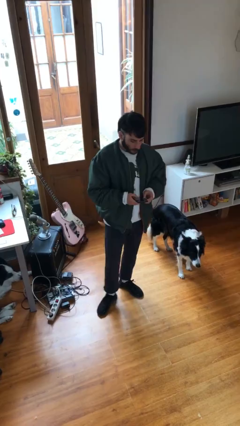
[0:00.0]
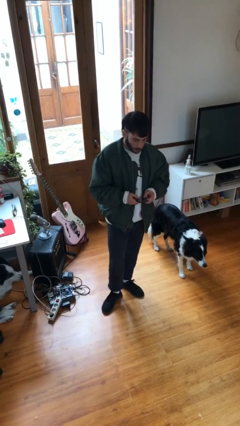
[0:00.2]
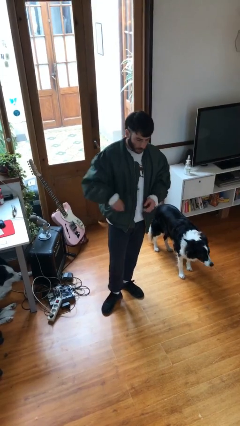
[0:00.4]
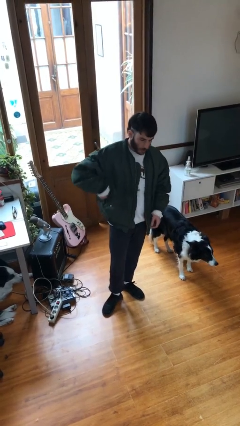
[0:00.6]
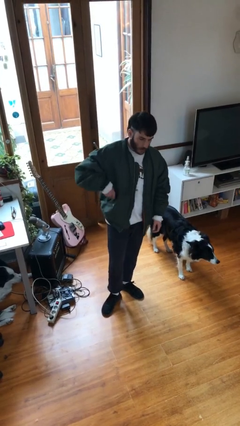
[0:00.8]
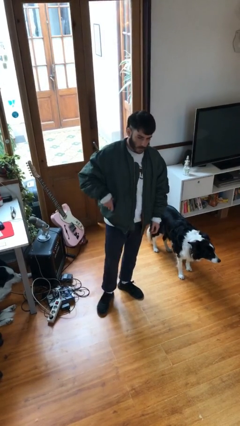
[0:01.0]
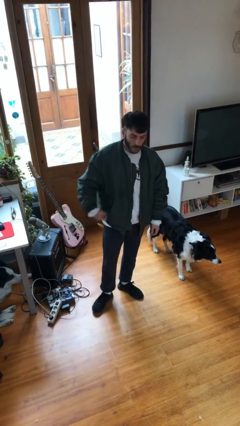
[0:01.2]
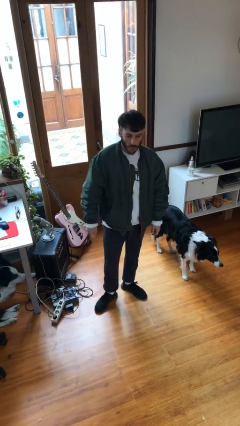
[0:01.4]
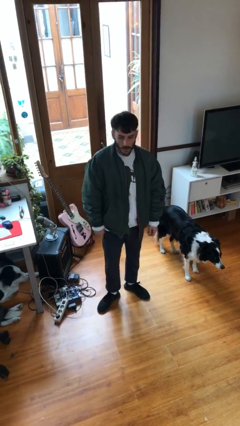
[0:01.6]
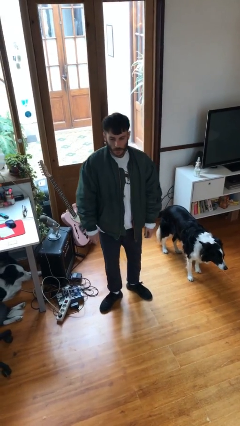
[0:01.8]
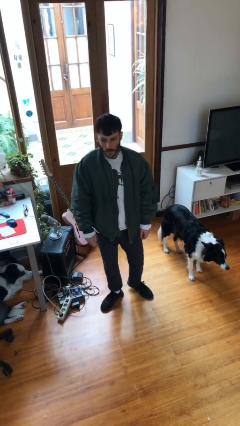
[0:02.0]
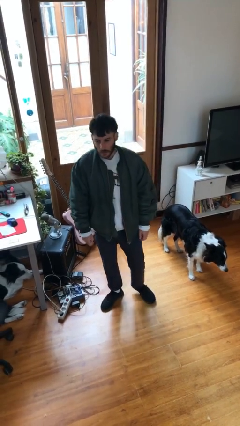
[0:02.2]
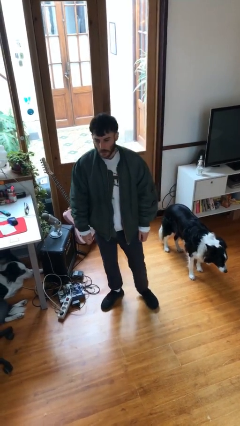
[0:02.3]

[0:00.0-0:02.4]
person puts phone into pocket

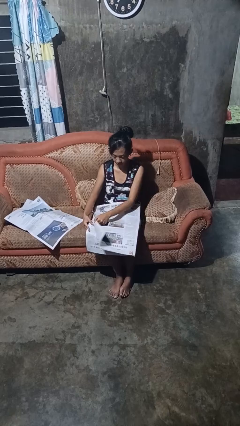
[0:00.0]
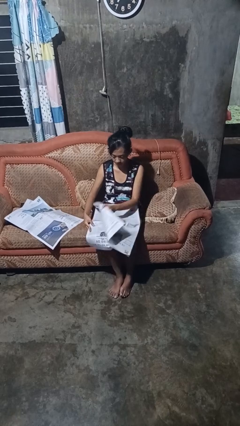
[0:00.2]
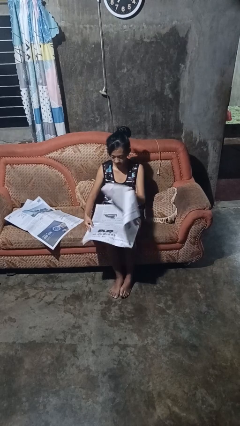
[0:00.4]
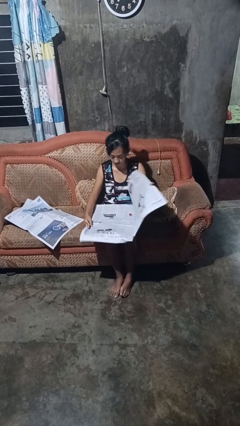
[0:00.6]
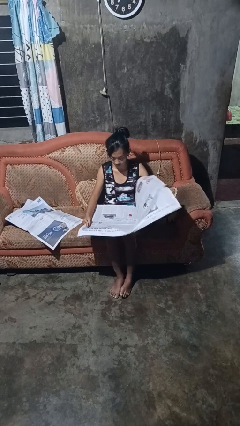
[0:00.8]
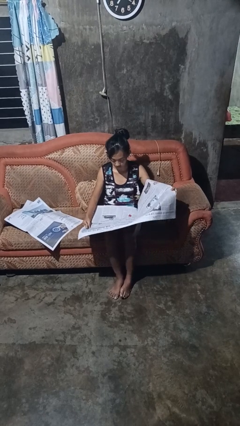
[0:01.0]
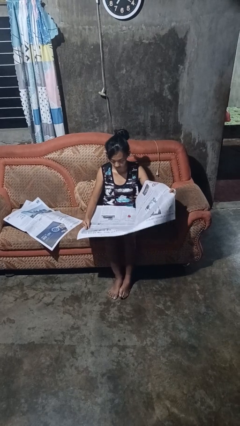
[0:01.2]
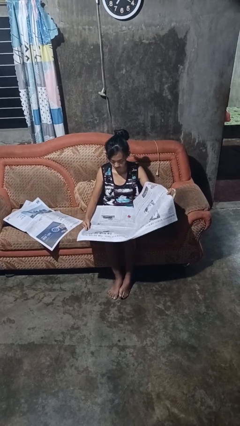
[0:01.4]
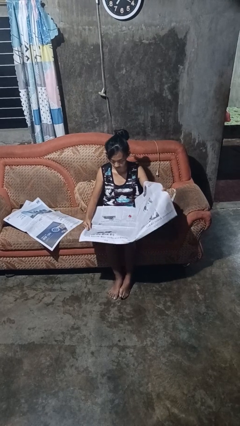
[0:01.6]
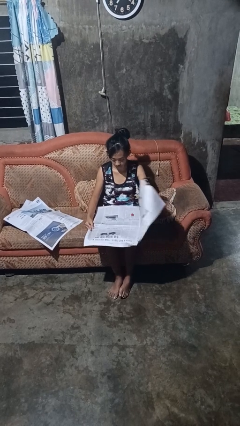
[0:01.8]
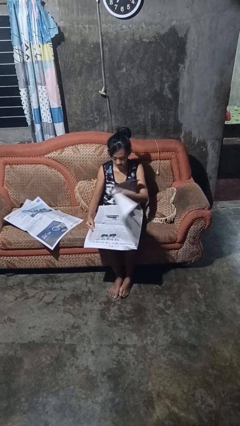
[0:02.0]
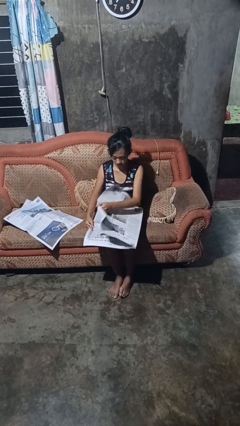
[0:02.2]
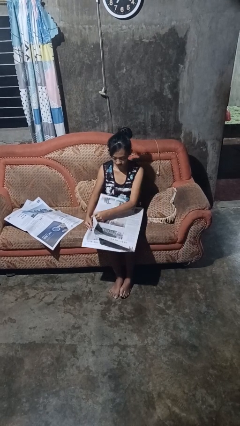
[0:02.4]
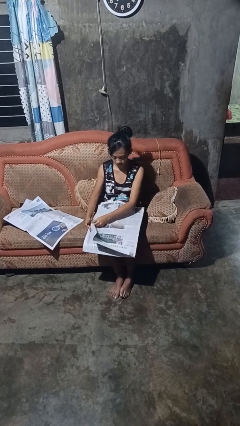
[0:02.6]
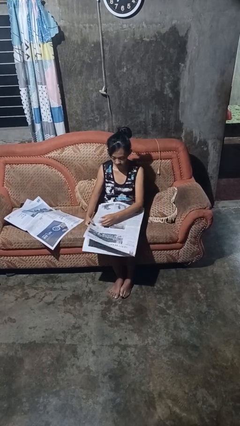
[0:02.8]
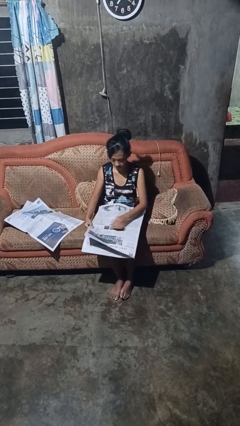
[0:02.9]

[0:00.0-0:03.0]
person reads newspaper

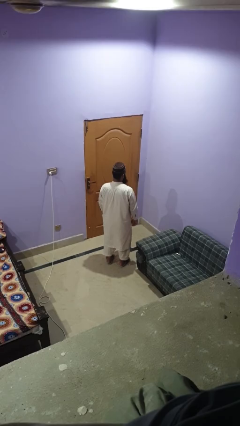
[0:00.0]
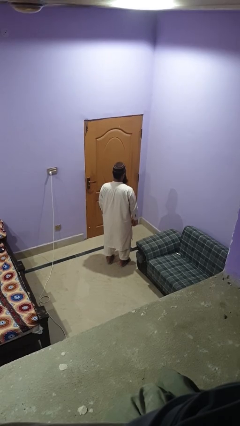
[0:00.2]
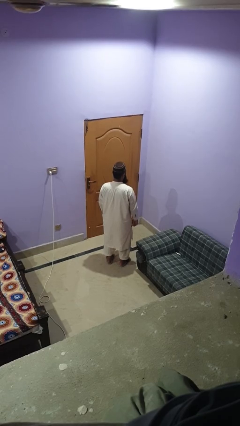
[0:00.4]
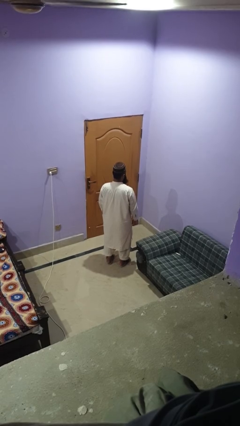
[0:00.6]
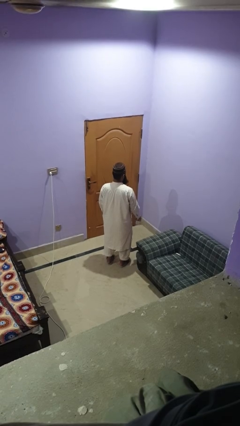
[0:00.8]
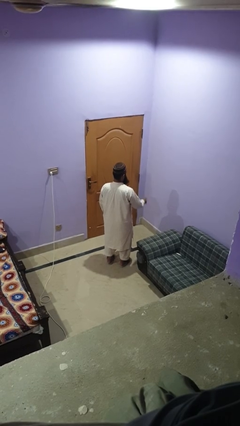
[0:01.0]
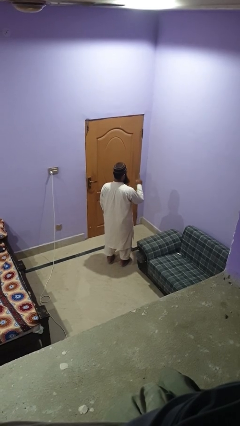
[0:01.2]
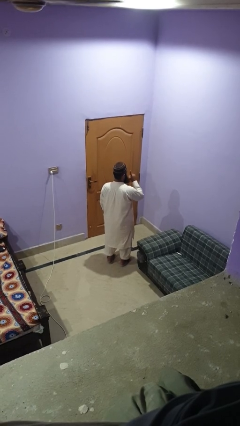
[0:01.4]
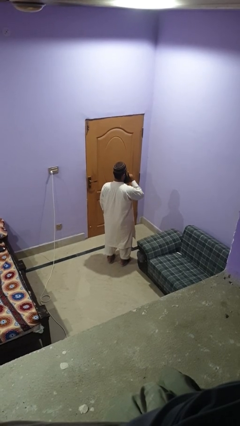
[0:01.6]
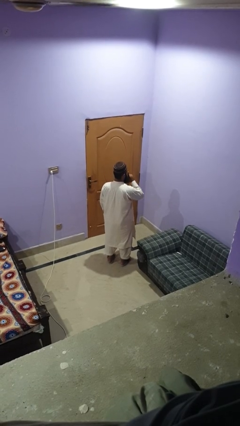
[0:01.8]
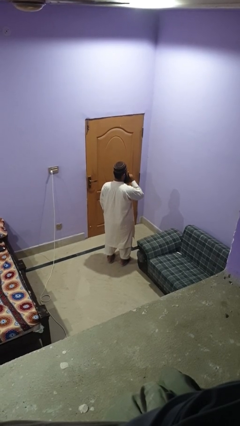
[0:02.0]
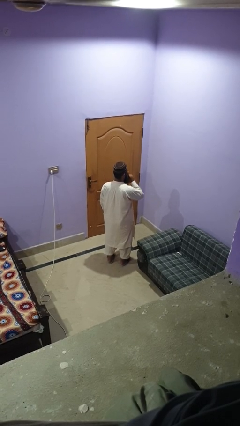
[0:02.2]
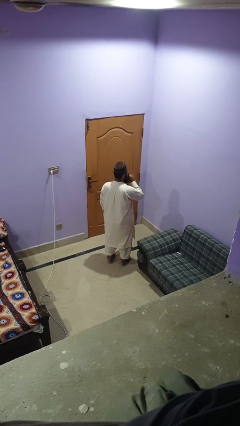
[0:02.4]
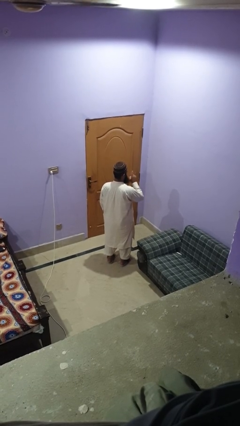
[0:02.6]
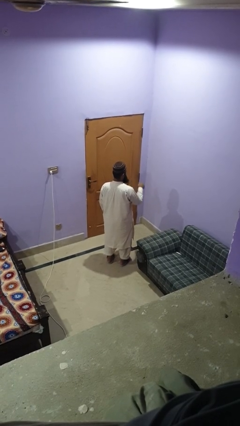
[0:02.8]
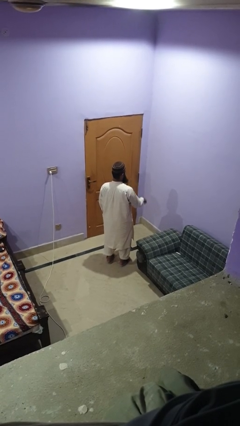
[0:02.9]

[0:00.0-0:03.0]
person gestures be quiet

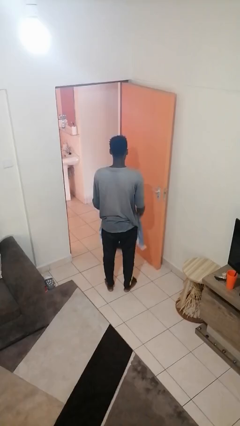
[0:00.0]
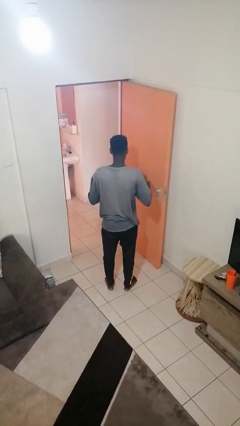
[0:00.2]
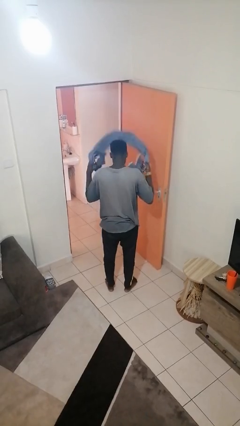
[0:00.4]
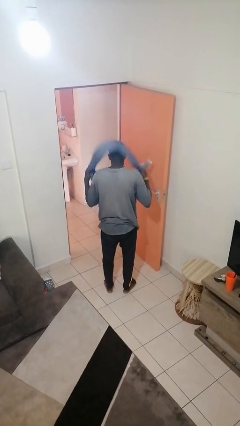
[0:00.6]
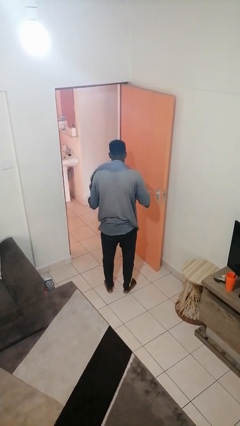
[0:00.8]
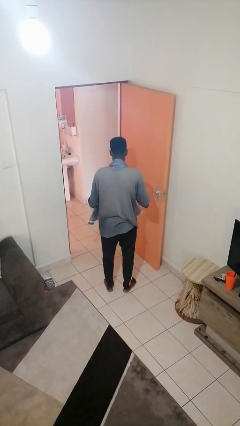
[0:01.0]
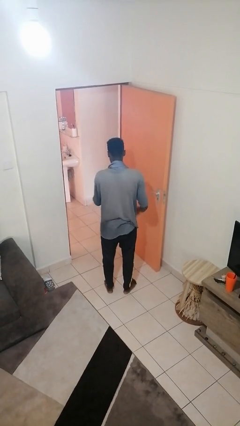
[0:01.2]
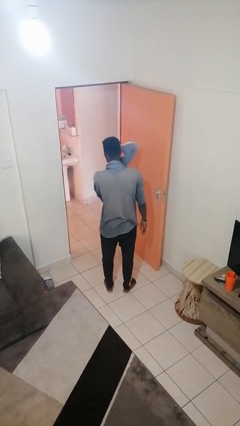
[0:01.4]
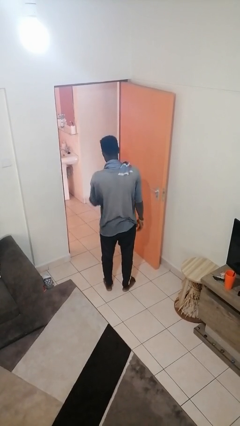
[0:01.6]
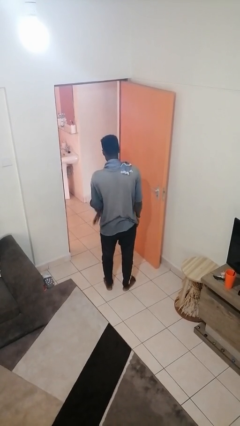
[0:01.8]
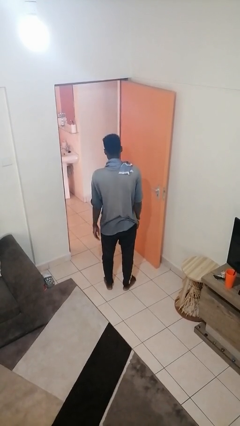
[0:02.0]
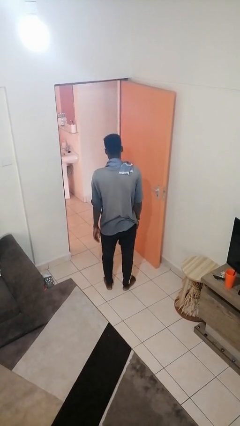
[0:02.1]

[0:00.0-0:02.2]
person puts on scarf

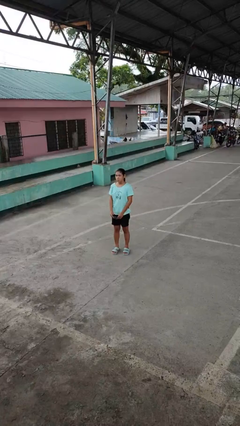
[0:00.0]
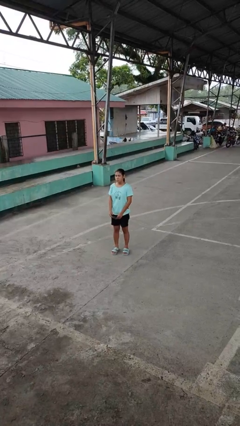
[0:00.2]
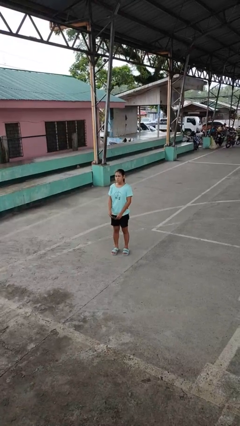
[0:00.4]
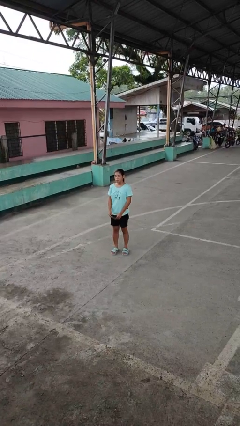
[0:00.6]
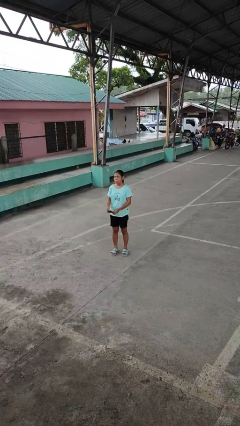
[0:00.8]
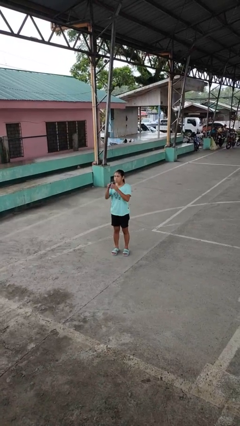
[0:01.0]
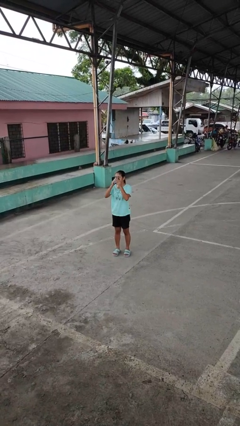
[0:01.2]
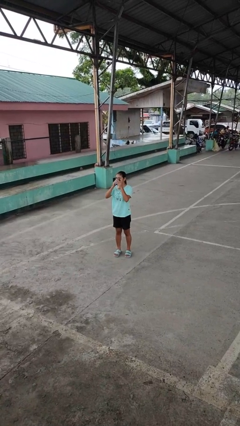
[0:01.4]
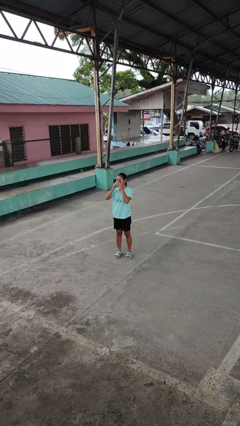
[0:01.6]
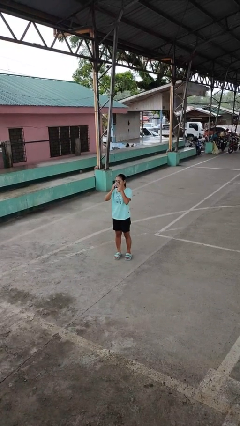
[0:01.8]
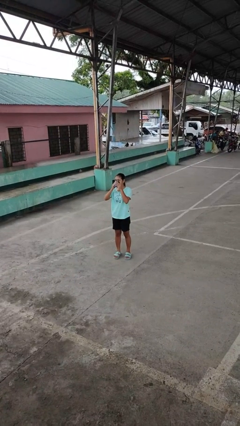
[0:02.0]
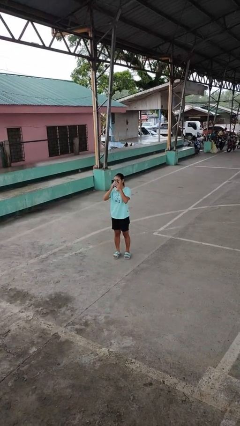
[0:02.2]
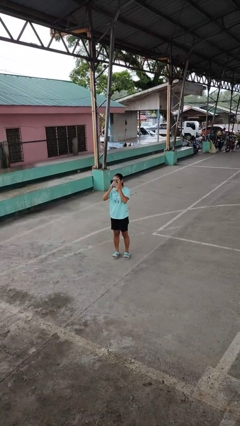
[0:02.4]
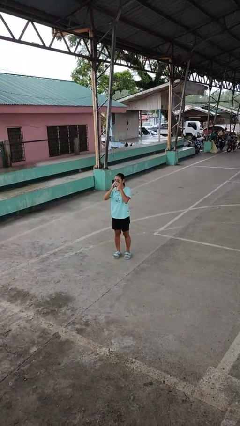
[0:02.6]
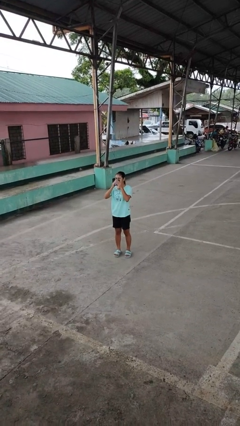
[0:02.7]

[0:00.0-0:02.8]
person blows nose

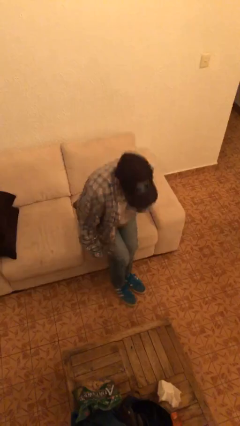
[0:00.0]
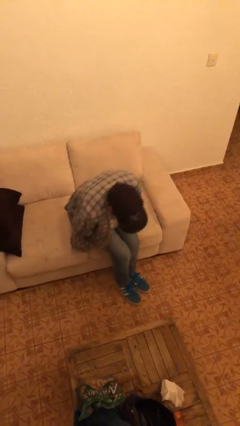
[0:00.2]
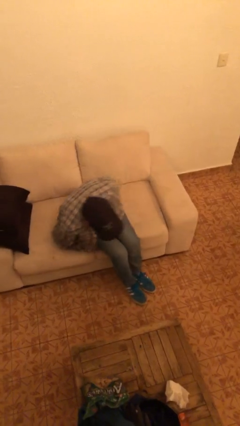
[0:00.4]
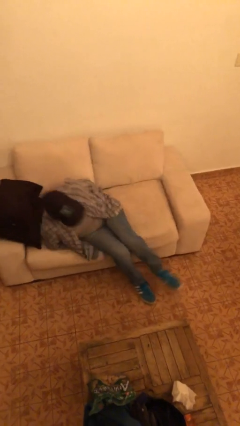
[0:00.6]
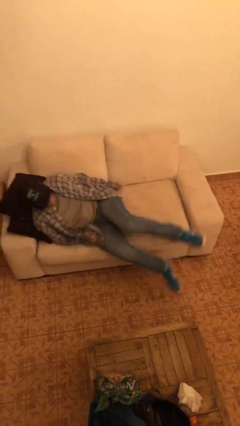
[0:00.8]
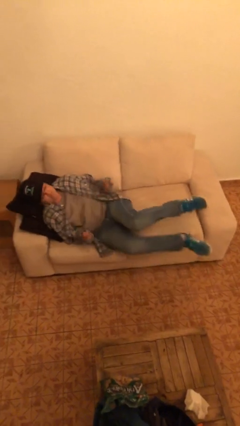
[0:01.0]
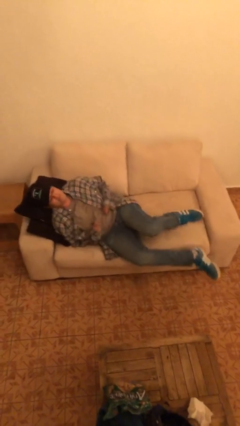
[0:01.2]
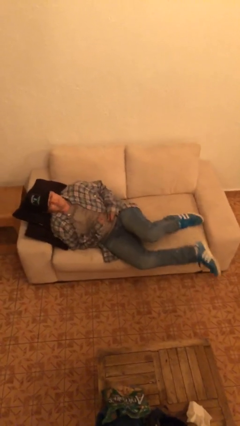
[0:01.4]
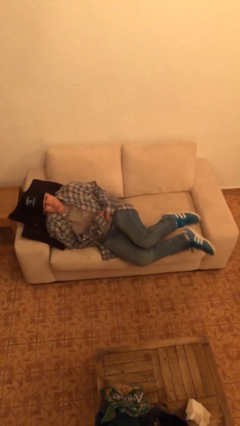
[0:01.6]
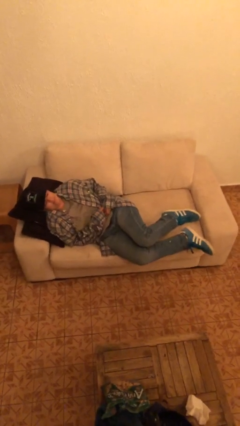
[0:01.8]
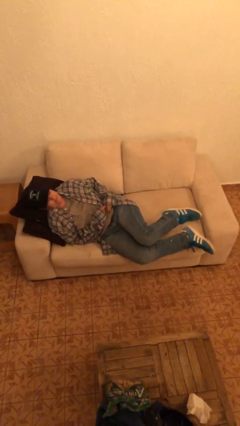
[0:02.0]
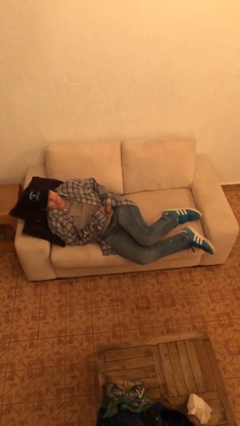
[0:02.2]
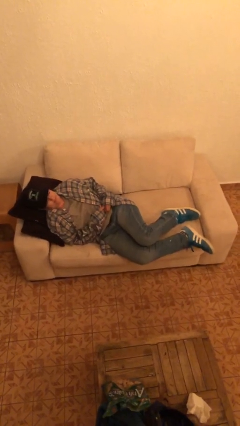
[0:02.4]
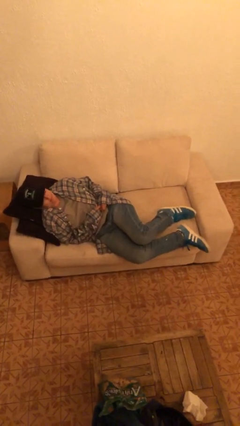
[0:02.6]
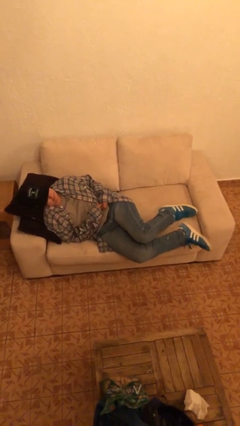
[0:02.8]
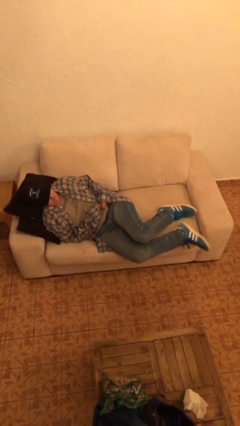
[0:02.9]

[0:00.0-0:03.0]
person lies down on couch

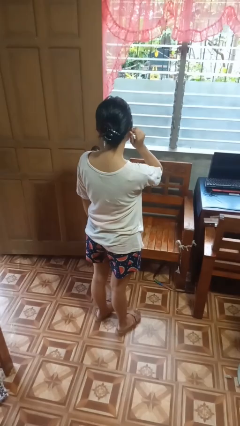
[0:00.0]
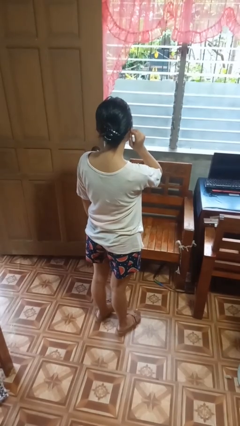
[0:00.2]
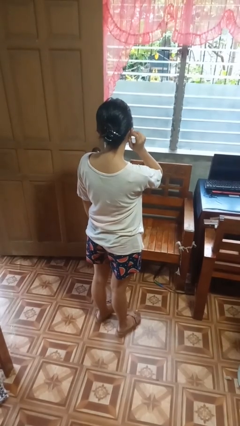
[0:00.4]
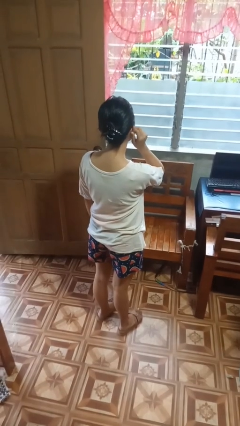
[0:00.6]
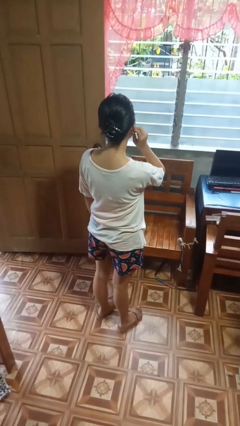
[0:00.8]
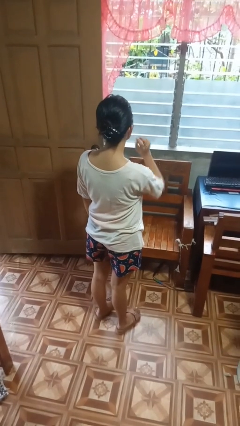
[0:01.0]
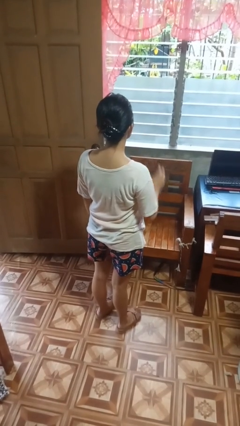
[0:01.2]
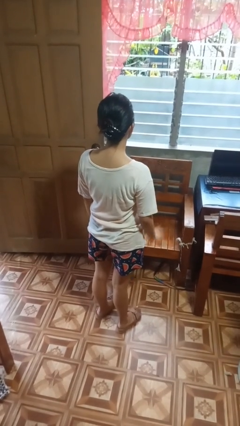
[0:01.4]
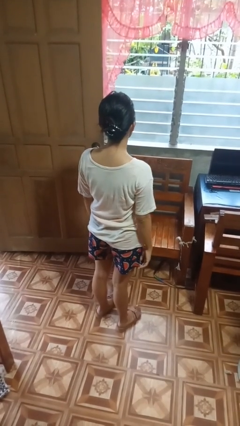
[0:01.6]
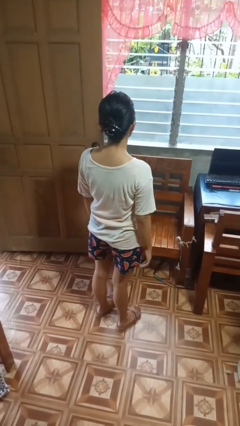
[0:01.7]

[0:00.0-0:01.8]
person touches earlobe
